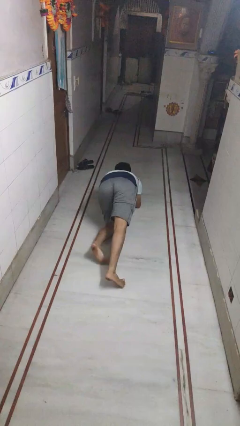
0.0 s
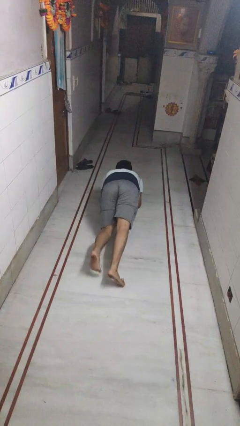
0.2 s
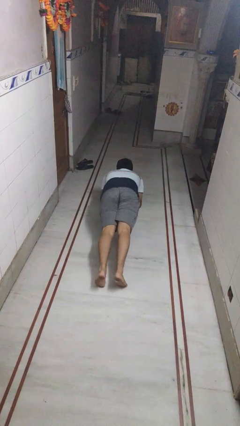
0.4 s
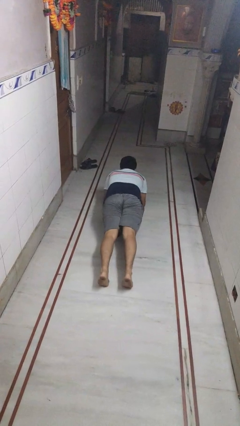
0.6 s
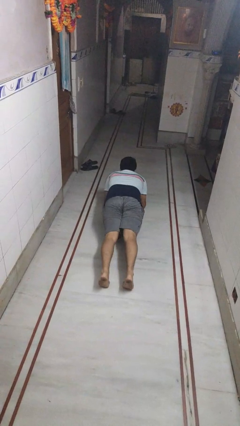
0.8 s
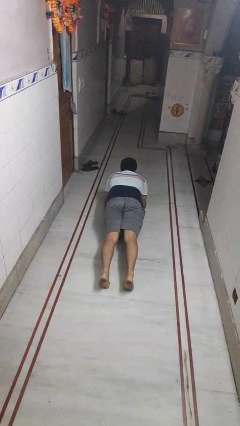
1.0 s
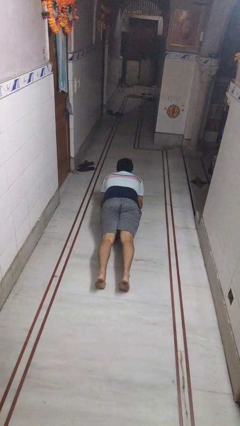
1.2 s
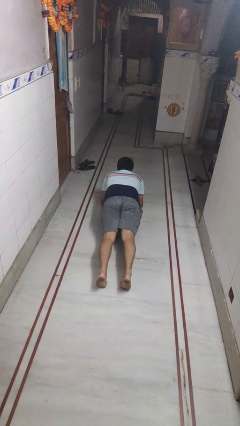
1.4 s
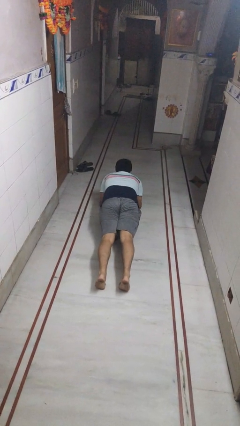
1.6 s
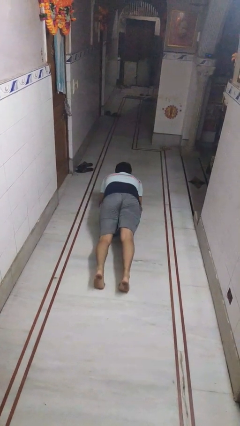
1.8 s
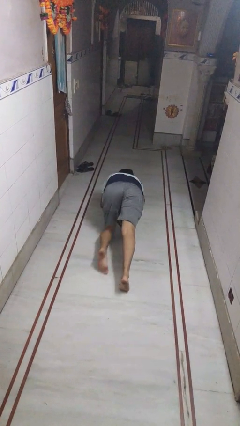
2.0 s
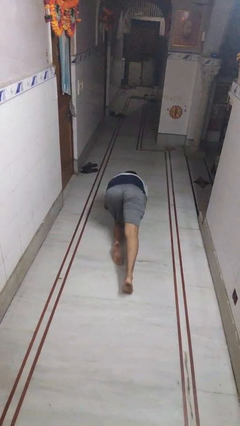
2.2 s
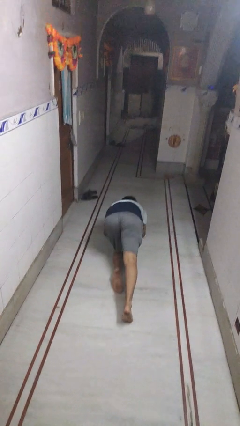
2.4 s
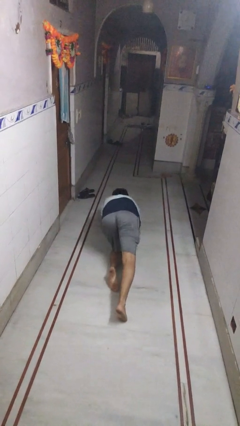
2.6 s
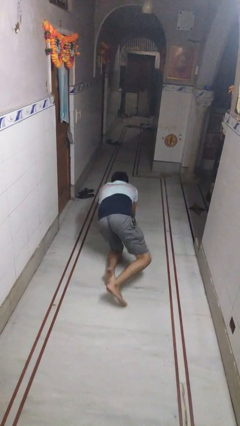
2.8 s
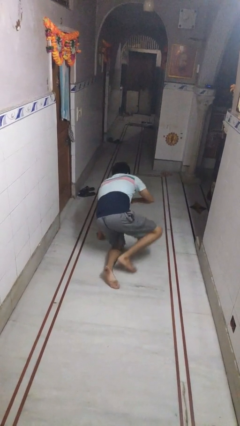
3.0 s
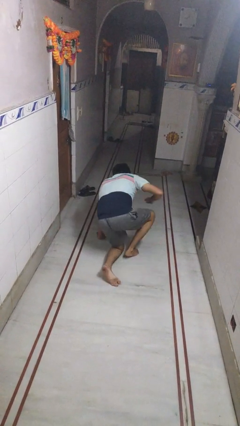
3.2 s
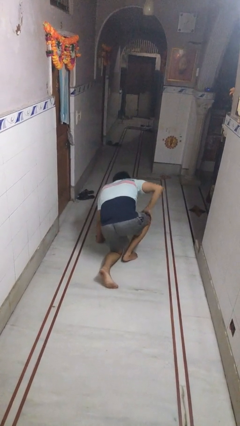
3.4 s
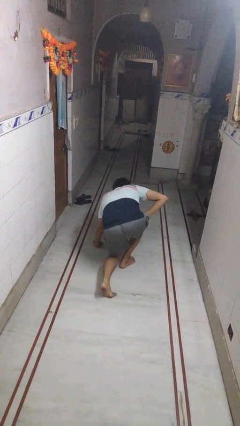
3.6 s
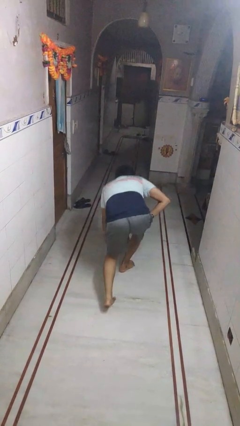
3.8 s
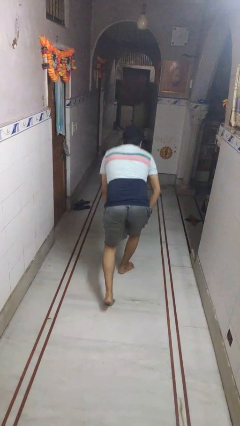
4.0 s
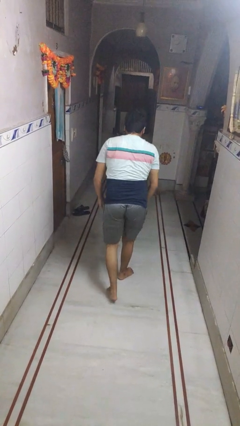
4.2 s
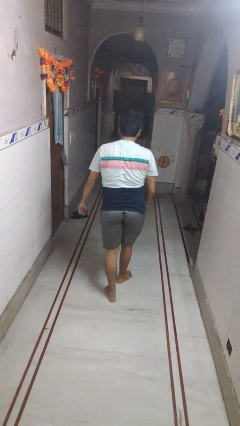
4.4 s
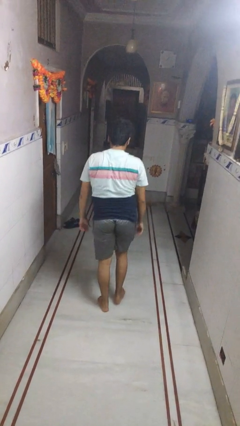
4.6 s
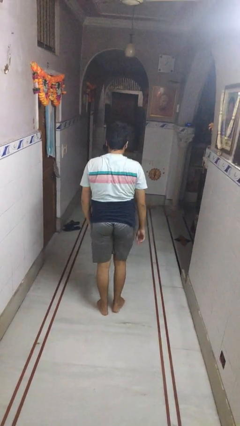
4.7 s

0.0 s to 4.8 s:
person stands up from floor

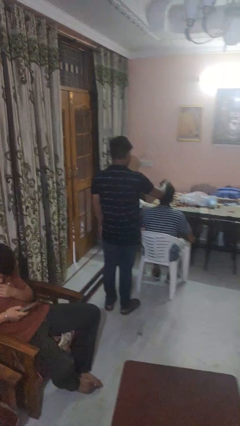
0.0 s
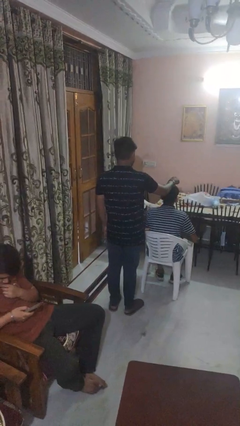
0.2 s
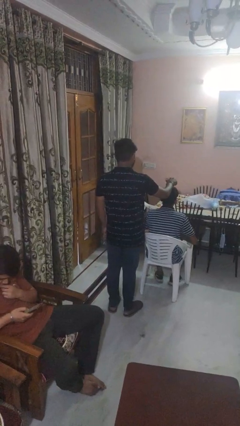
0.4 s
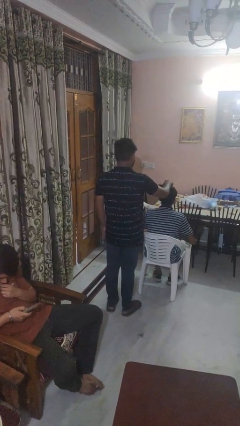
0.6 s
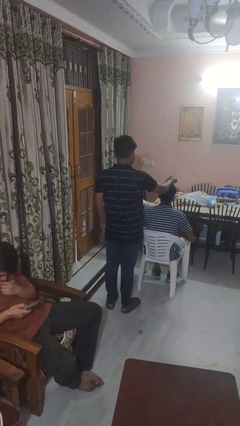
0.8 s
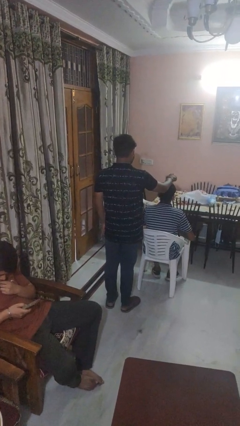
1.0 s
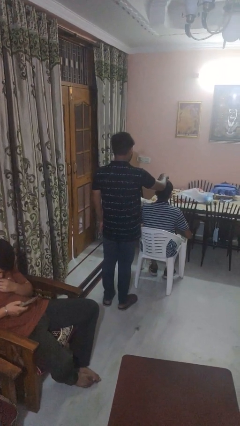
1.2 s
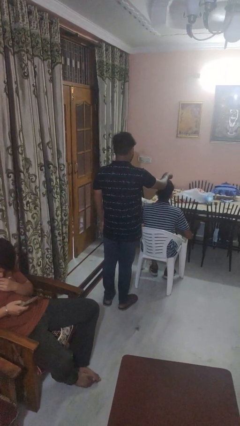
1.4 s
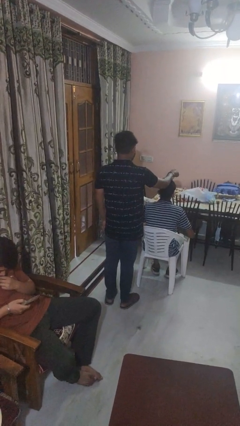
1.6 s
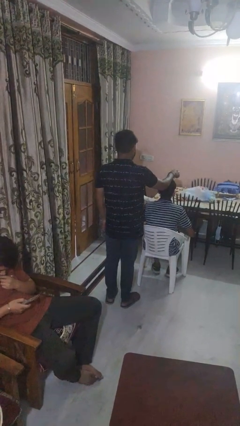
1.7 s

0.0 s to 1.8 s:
person brushes hair of person

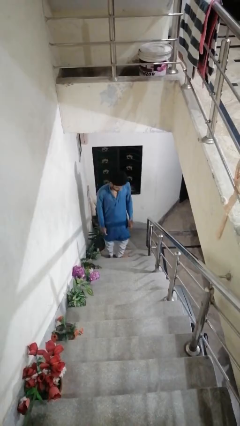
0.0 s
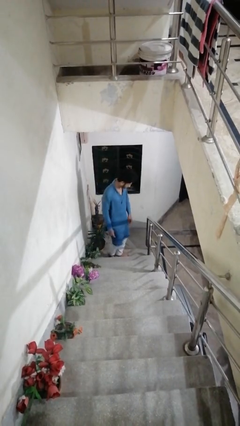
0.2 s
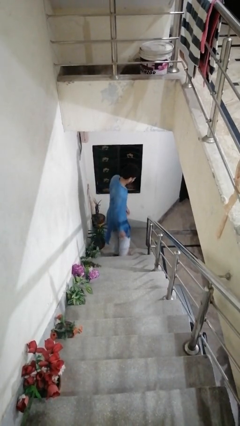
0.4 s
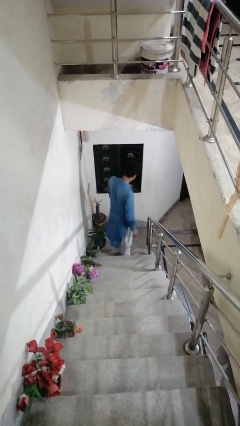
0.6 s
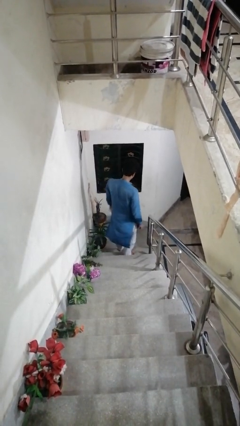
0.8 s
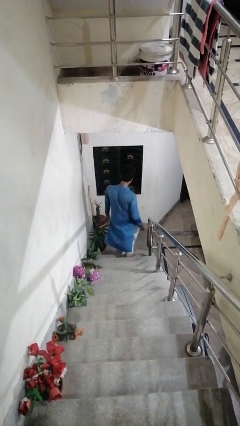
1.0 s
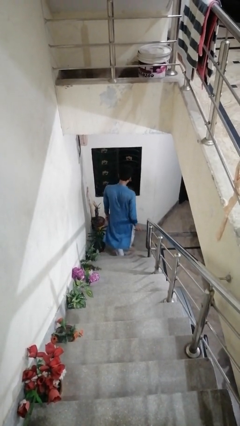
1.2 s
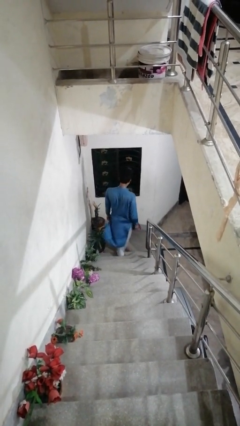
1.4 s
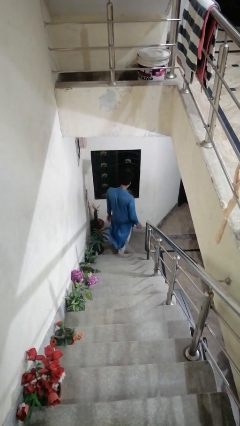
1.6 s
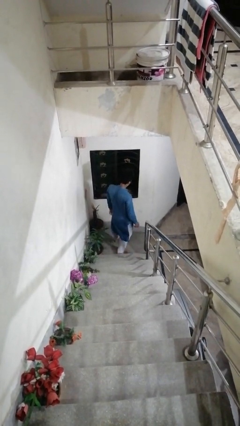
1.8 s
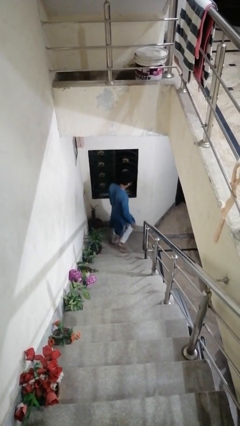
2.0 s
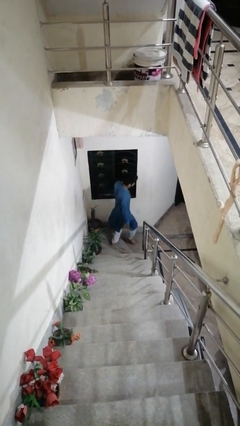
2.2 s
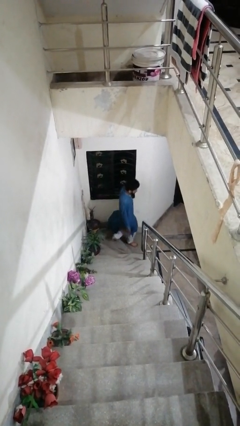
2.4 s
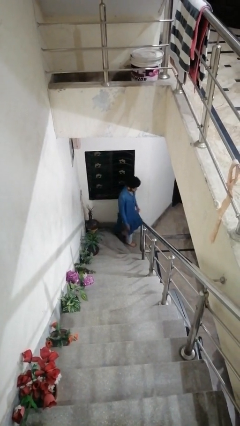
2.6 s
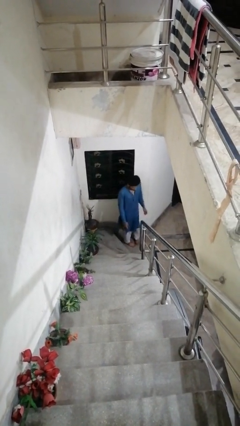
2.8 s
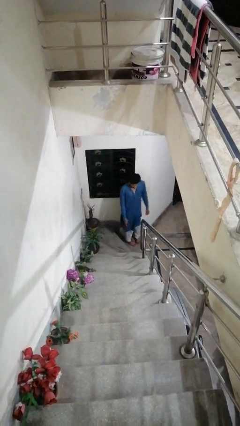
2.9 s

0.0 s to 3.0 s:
person climbs down stairs

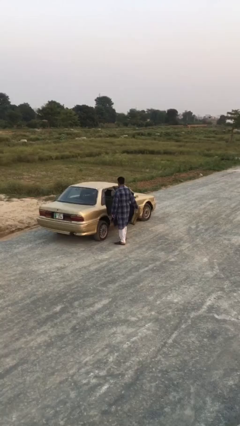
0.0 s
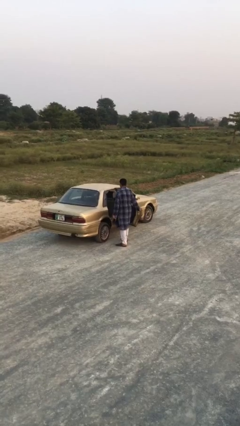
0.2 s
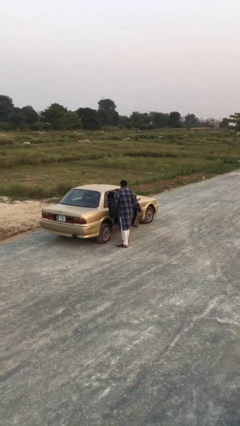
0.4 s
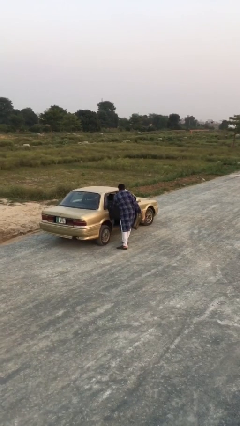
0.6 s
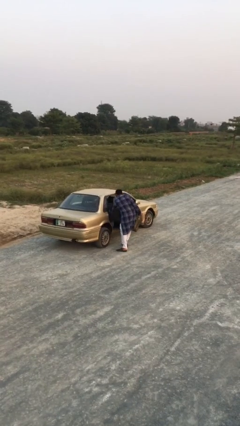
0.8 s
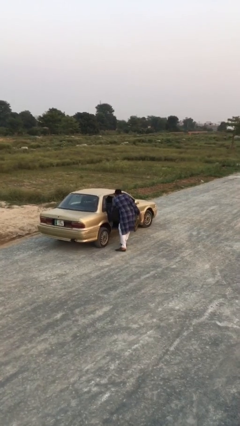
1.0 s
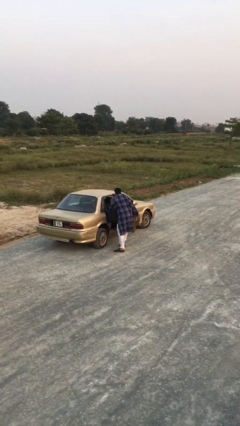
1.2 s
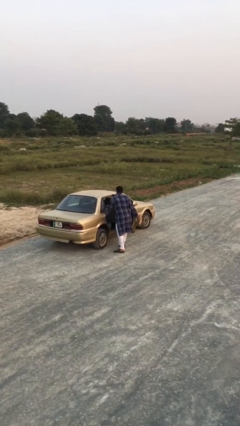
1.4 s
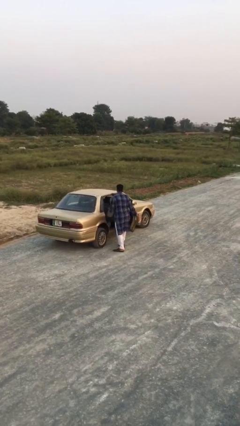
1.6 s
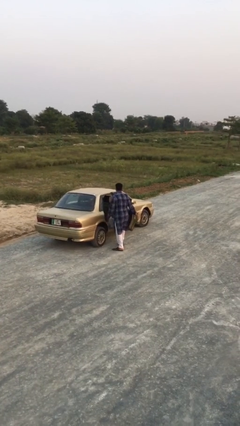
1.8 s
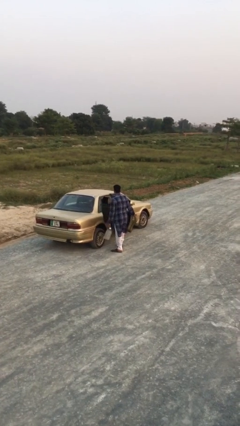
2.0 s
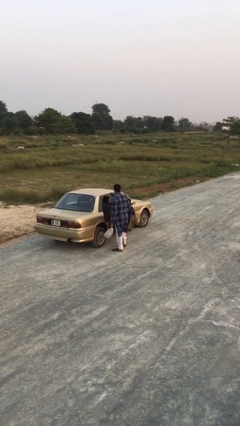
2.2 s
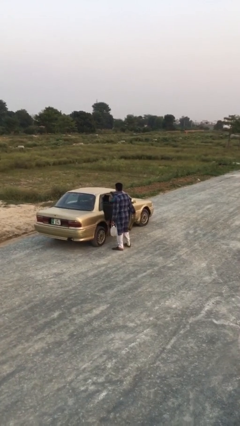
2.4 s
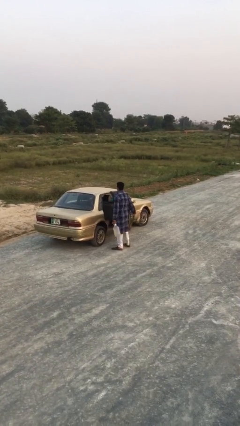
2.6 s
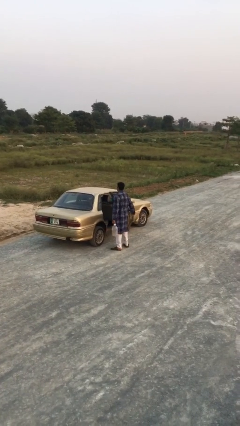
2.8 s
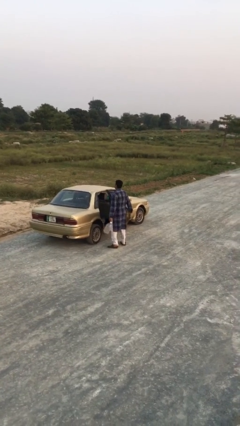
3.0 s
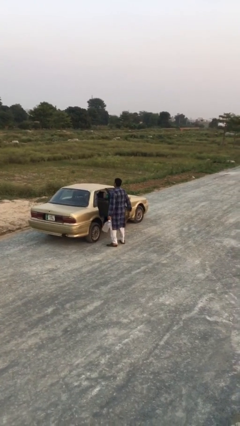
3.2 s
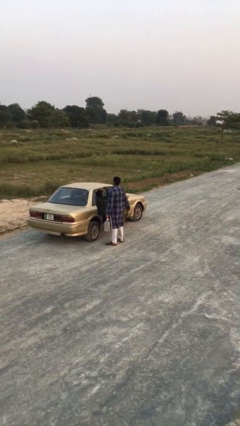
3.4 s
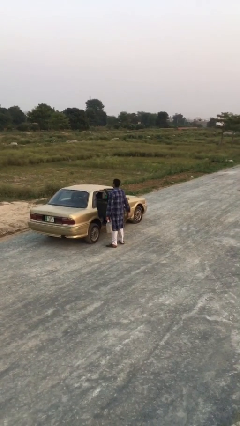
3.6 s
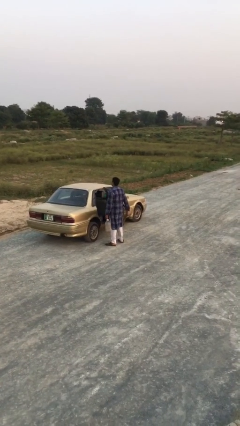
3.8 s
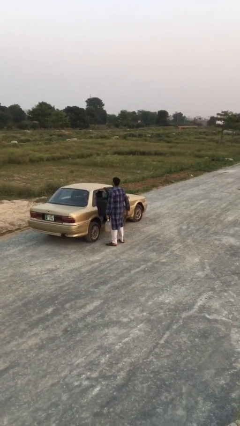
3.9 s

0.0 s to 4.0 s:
person unloads car

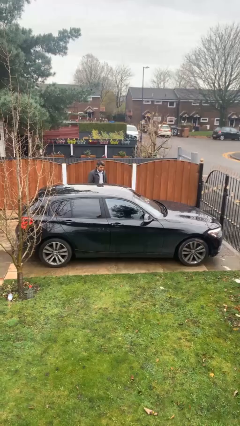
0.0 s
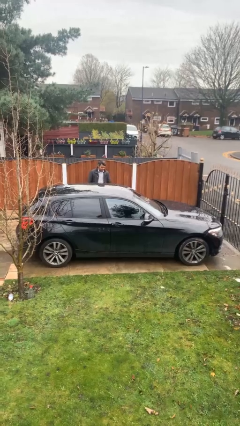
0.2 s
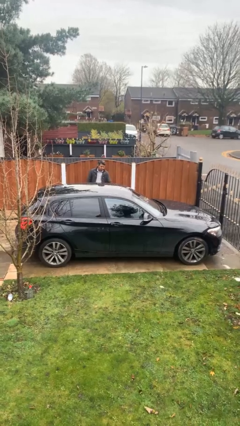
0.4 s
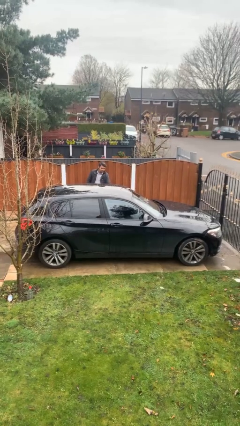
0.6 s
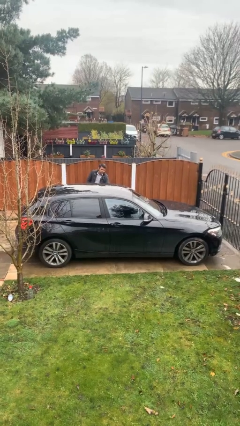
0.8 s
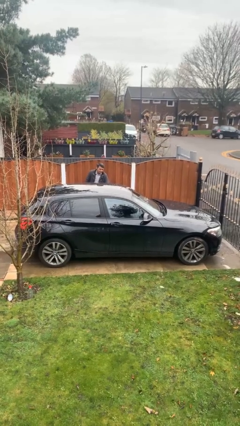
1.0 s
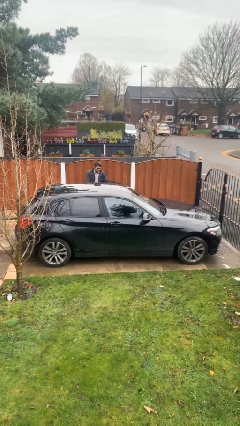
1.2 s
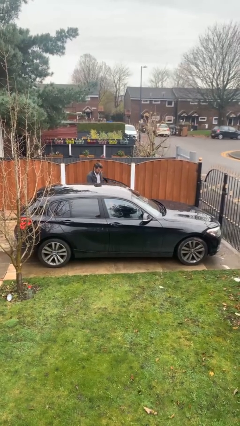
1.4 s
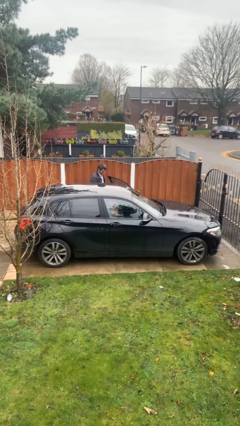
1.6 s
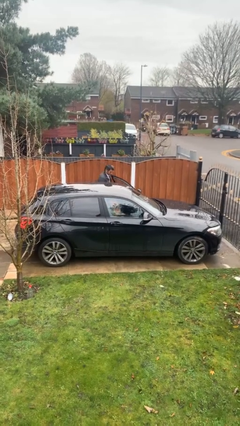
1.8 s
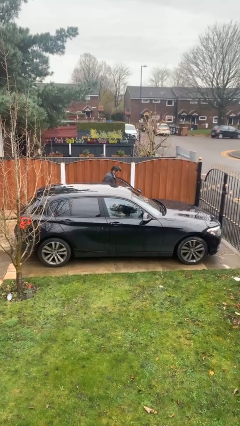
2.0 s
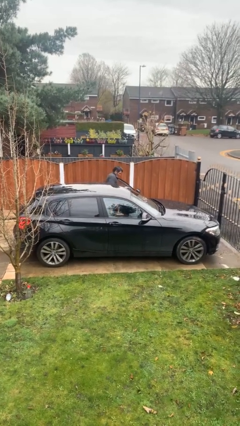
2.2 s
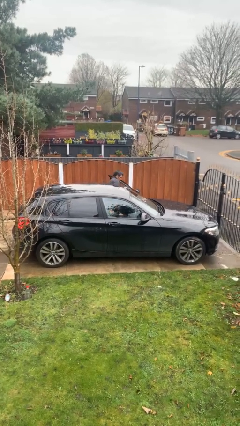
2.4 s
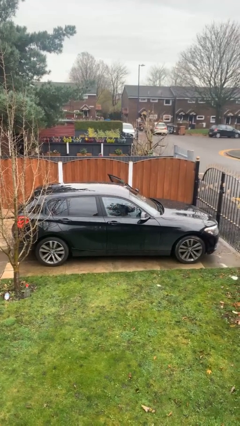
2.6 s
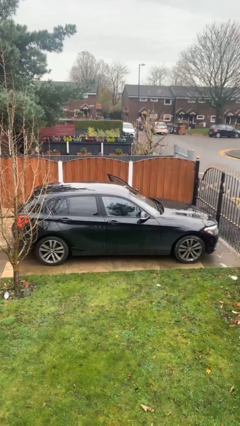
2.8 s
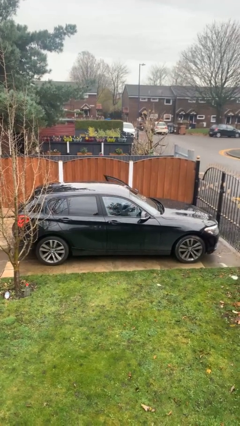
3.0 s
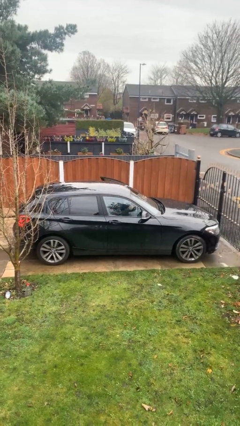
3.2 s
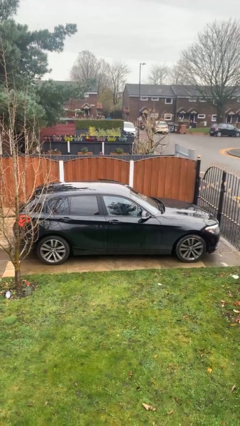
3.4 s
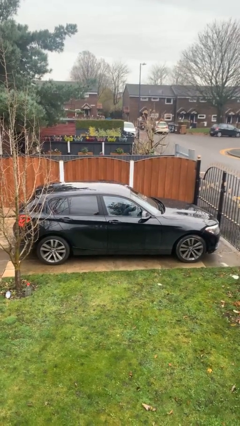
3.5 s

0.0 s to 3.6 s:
car picks up person
